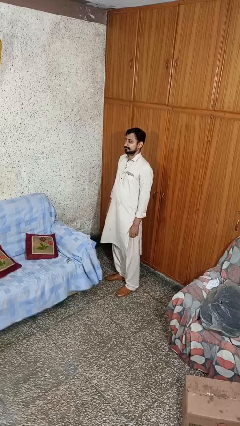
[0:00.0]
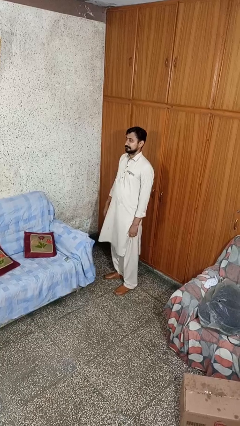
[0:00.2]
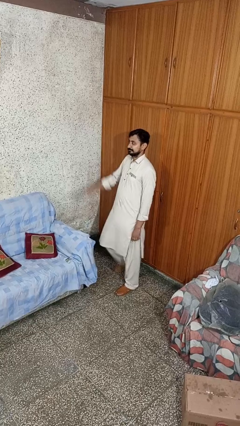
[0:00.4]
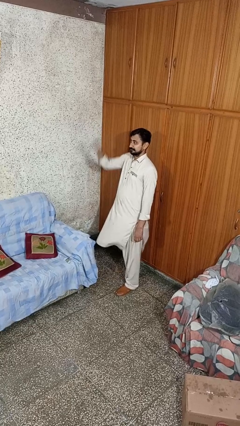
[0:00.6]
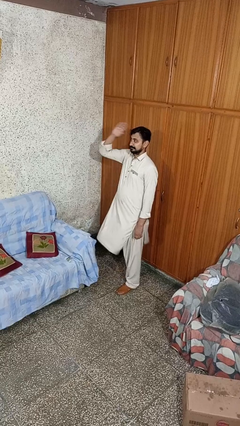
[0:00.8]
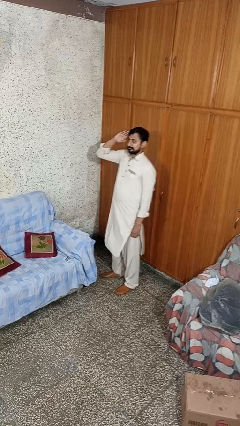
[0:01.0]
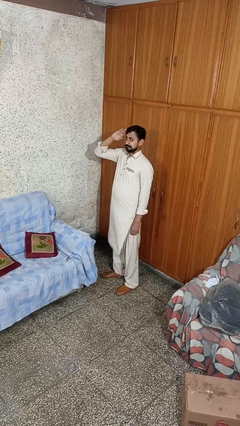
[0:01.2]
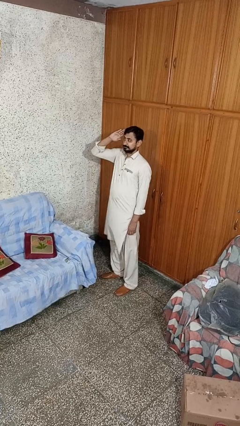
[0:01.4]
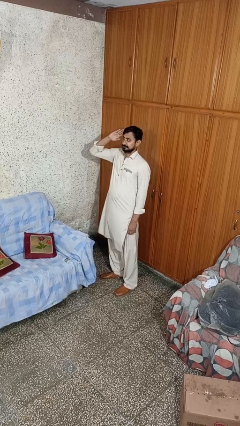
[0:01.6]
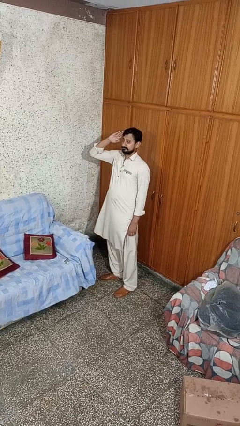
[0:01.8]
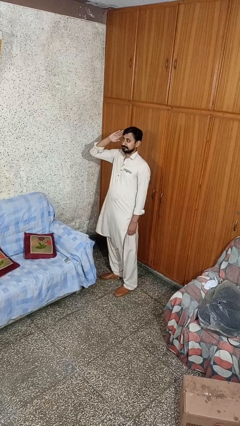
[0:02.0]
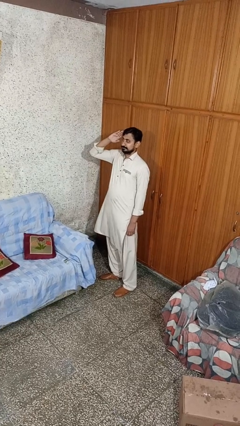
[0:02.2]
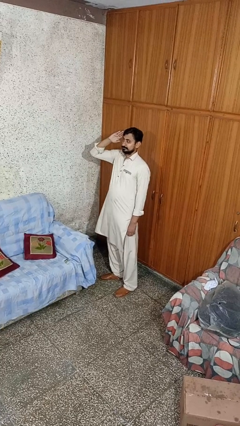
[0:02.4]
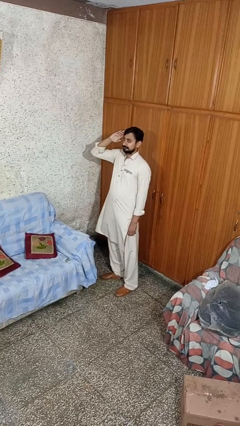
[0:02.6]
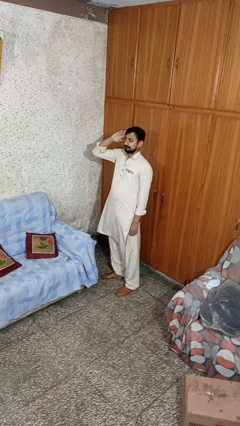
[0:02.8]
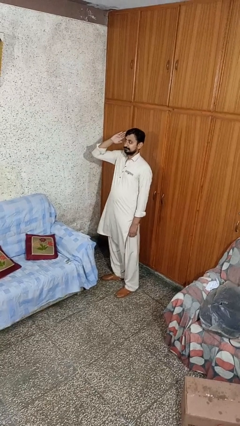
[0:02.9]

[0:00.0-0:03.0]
person salutes

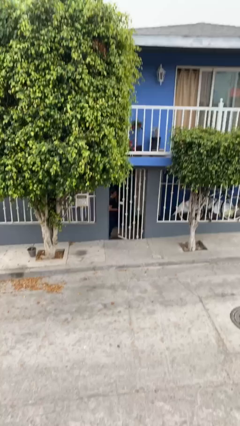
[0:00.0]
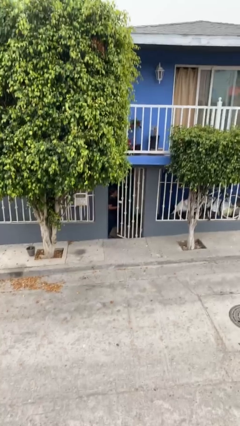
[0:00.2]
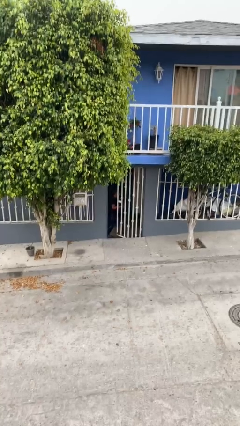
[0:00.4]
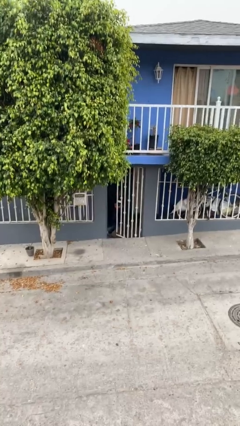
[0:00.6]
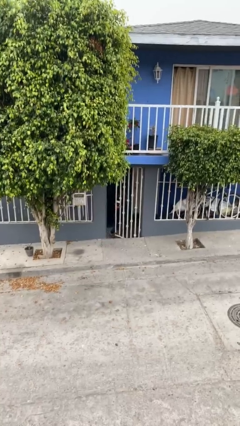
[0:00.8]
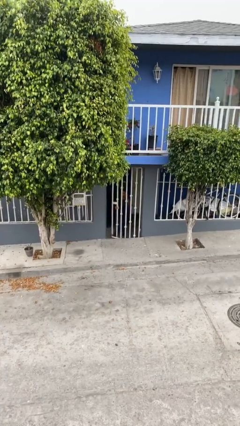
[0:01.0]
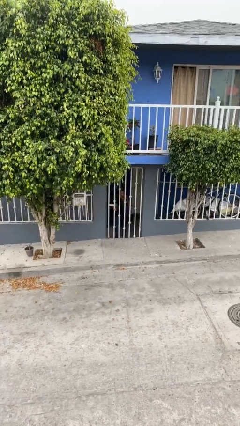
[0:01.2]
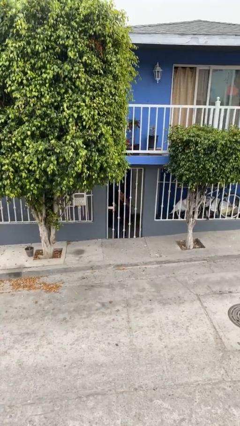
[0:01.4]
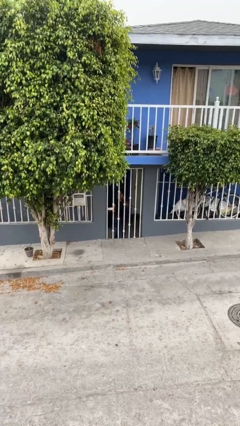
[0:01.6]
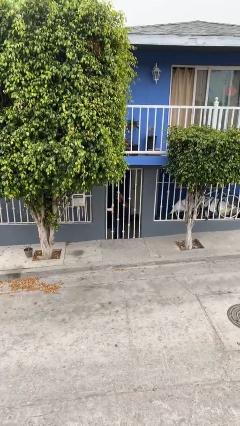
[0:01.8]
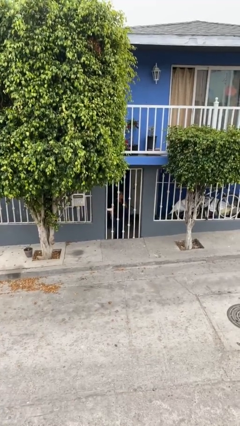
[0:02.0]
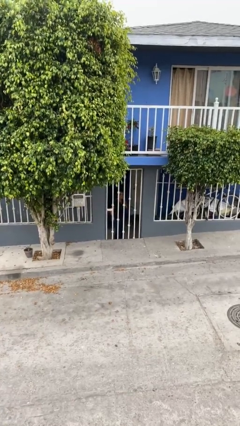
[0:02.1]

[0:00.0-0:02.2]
person closes facility door

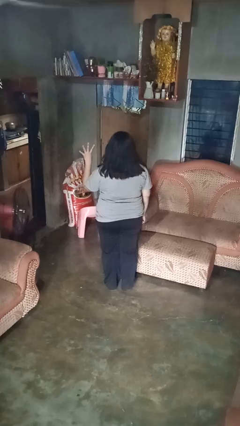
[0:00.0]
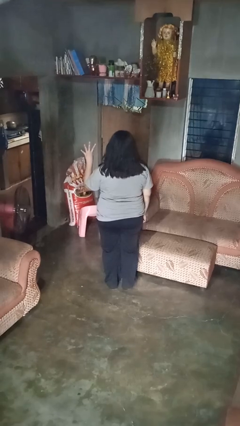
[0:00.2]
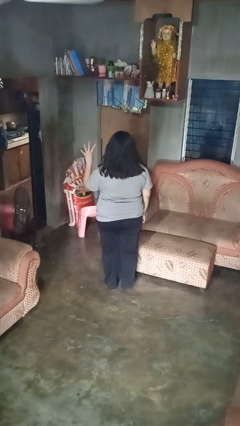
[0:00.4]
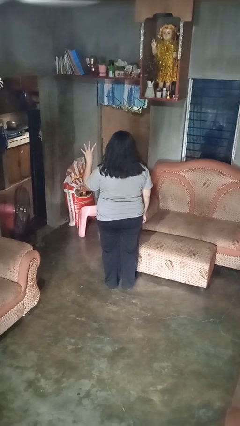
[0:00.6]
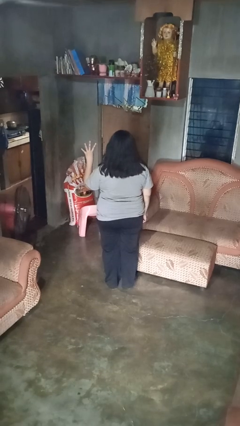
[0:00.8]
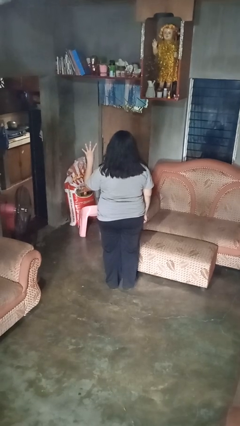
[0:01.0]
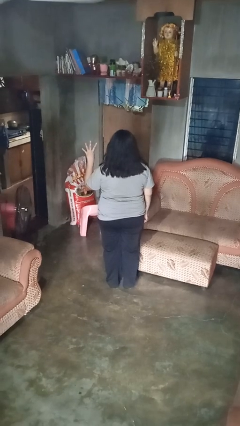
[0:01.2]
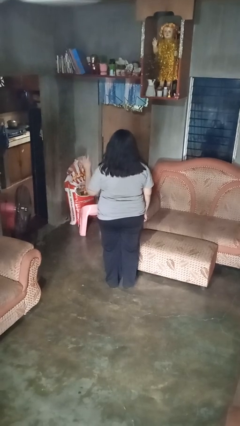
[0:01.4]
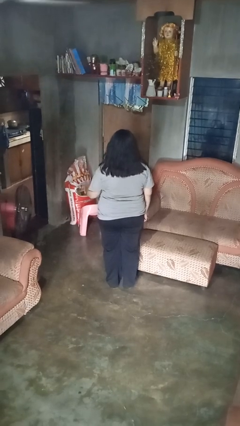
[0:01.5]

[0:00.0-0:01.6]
person gestures number four

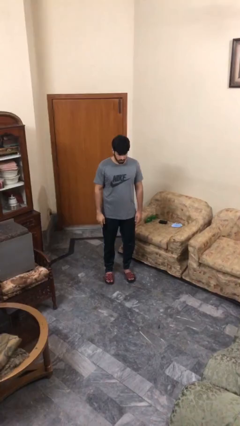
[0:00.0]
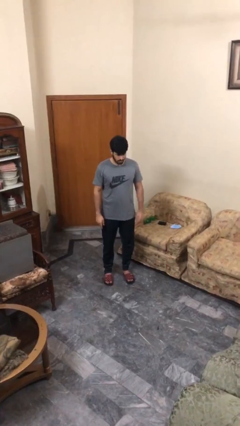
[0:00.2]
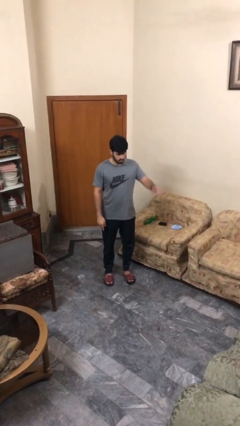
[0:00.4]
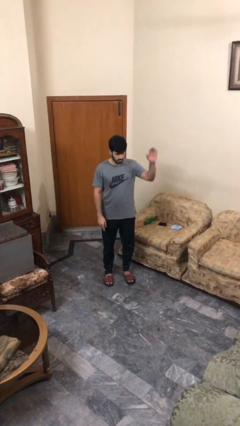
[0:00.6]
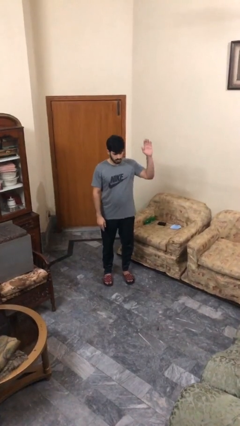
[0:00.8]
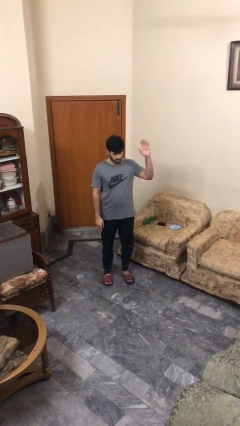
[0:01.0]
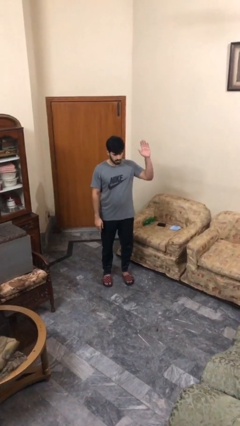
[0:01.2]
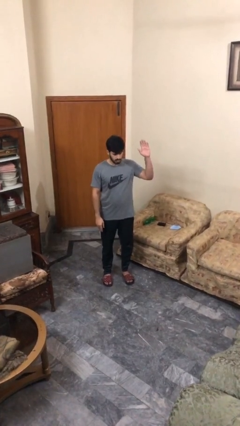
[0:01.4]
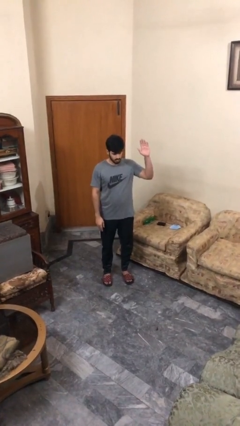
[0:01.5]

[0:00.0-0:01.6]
person gestures raise hand

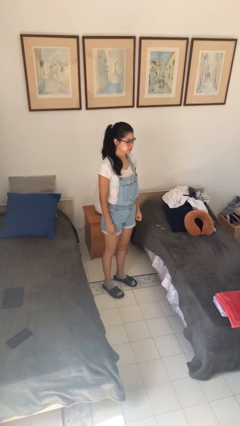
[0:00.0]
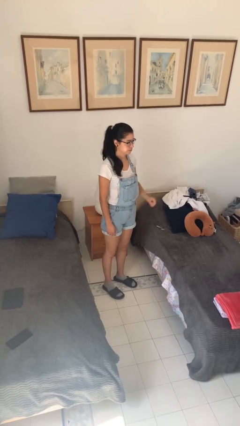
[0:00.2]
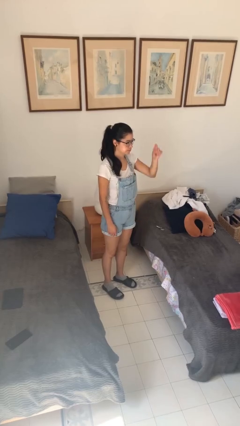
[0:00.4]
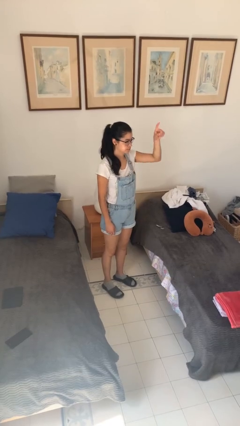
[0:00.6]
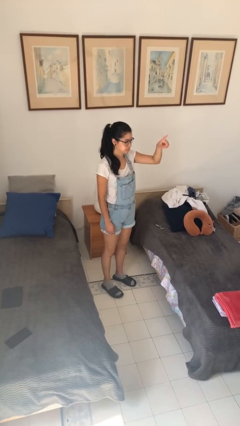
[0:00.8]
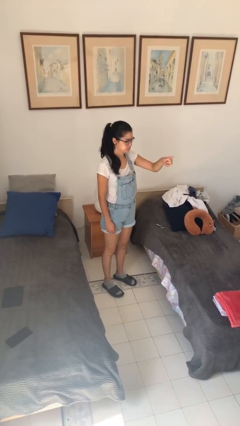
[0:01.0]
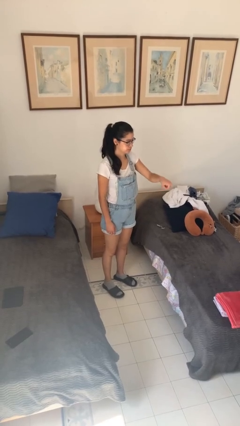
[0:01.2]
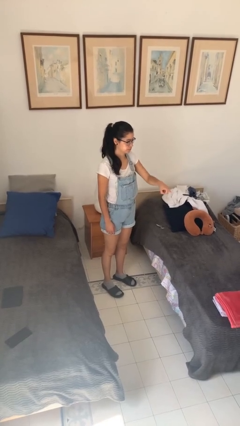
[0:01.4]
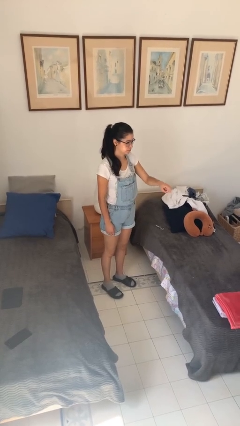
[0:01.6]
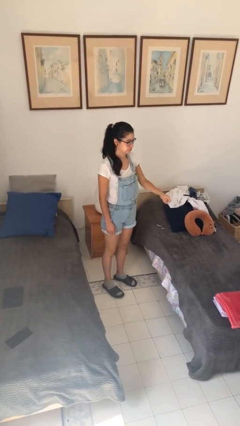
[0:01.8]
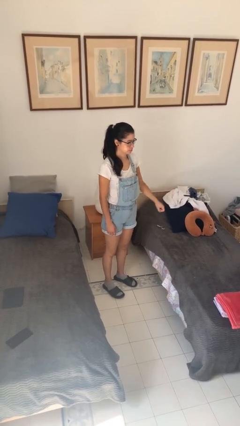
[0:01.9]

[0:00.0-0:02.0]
person gestures number one

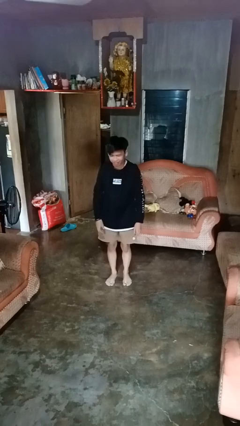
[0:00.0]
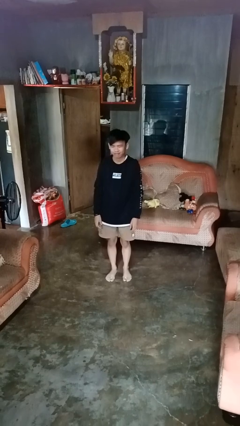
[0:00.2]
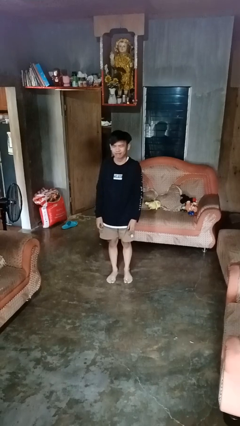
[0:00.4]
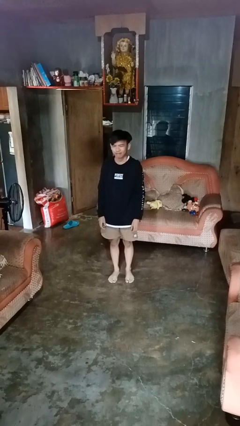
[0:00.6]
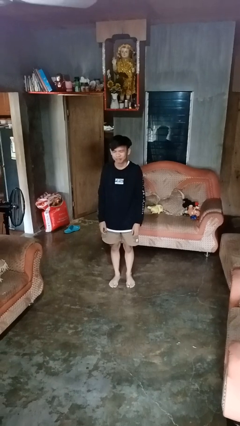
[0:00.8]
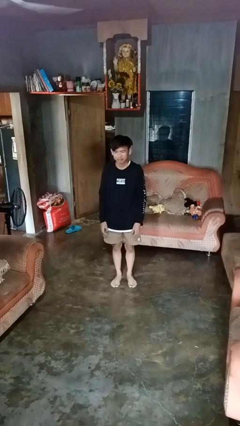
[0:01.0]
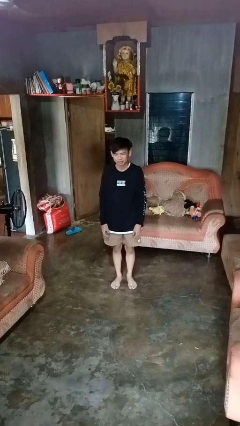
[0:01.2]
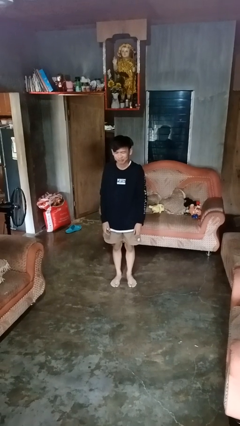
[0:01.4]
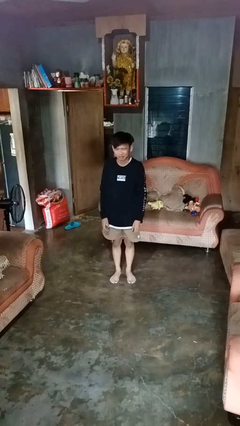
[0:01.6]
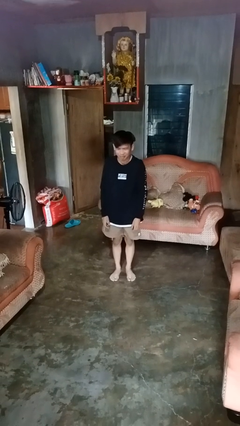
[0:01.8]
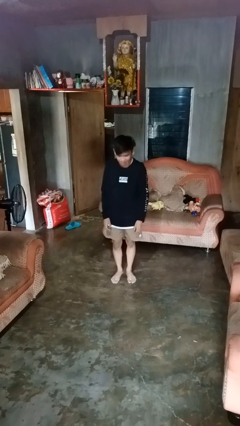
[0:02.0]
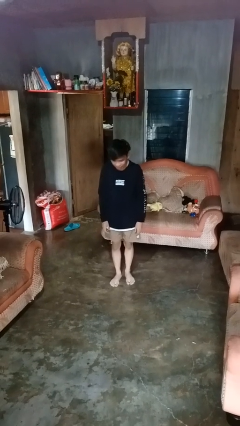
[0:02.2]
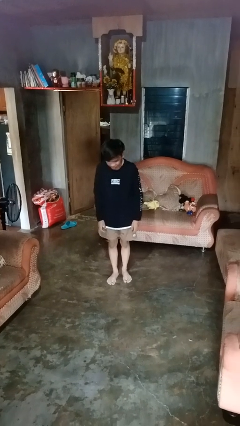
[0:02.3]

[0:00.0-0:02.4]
person stands up from floor

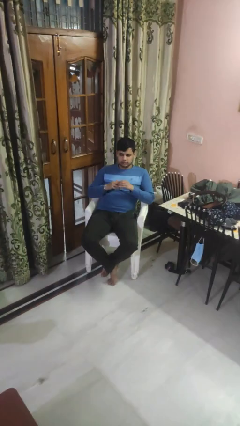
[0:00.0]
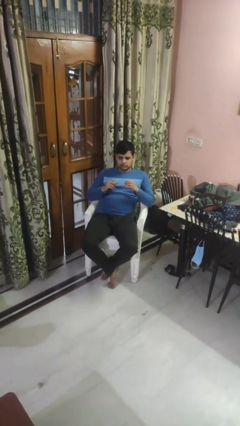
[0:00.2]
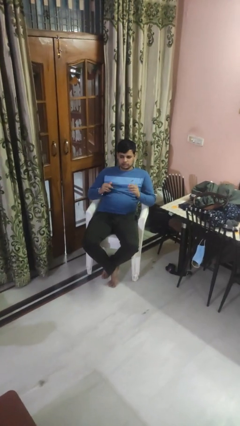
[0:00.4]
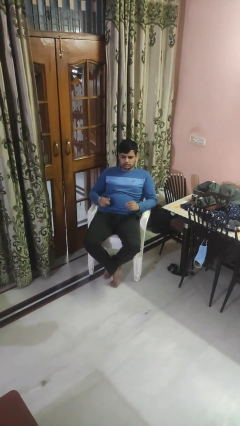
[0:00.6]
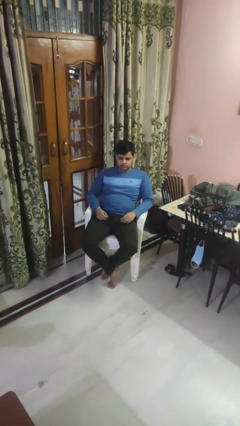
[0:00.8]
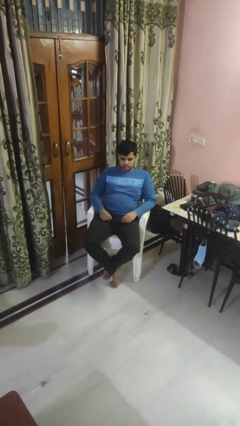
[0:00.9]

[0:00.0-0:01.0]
person takes off ring

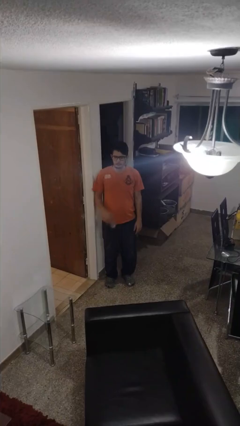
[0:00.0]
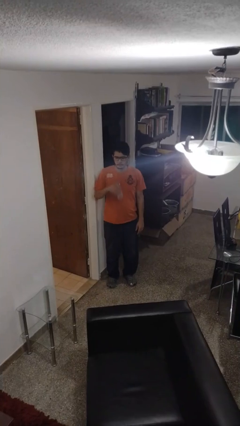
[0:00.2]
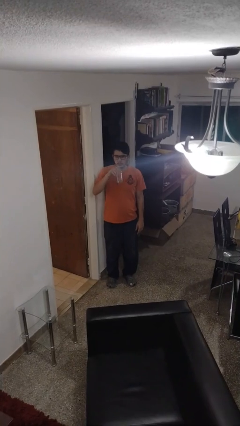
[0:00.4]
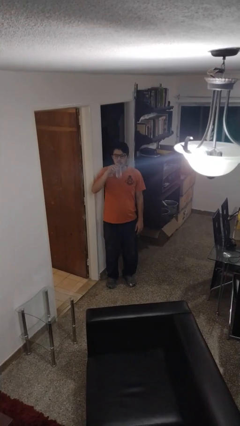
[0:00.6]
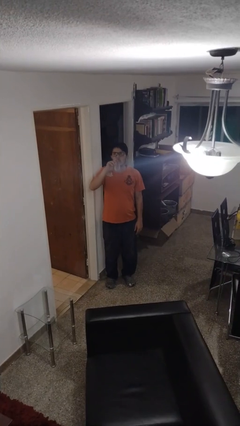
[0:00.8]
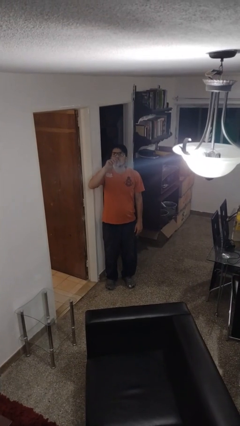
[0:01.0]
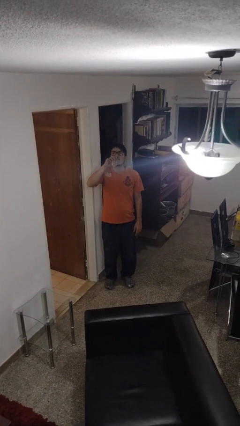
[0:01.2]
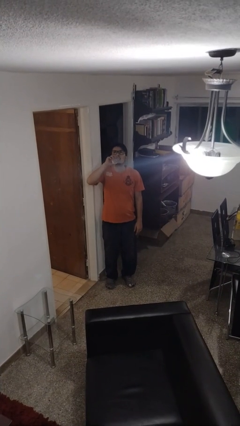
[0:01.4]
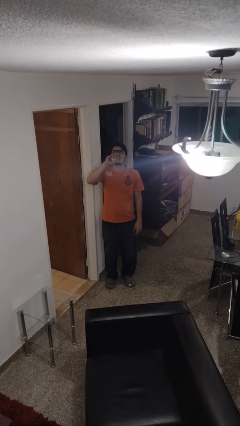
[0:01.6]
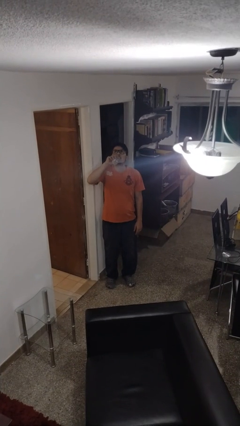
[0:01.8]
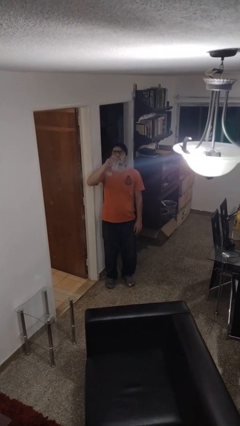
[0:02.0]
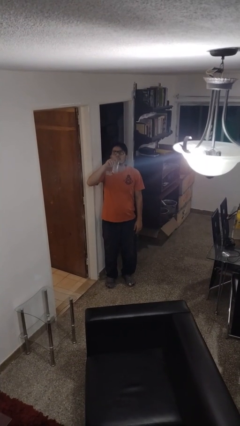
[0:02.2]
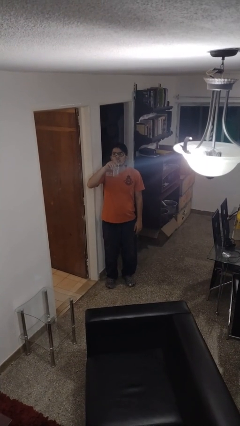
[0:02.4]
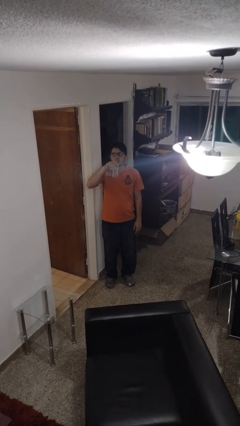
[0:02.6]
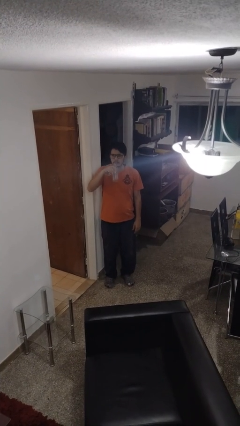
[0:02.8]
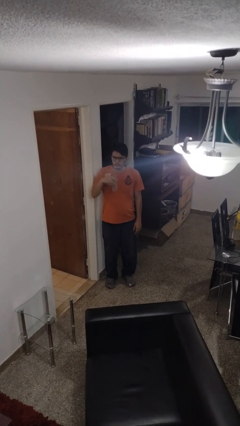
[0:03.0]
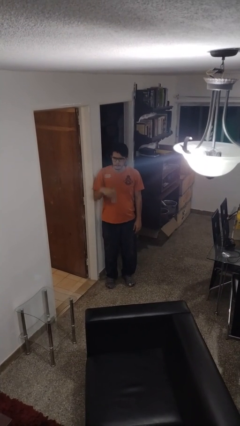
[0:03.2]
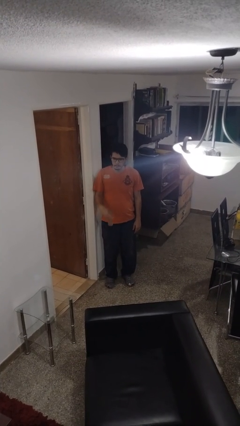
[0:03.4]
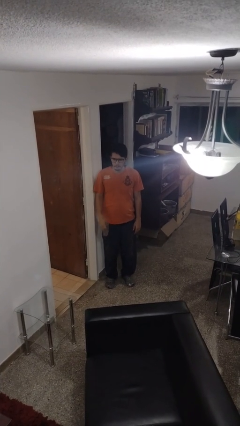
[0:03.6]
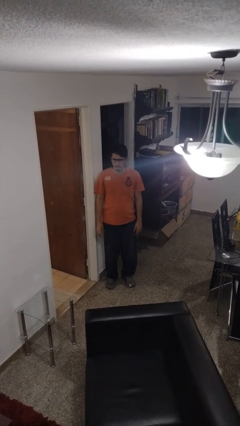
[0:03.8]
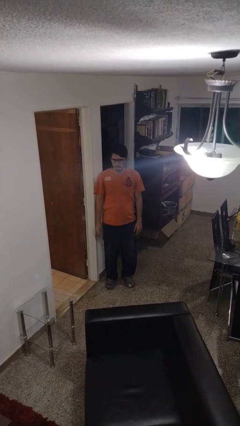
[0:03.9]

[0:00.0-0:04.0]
person drinks from bottle
